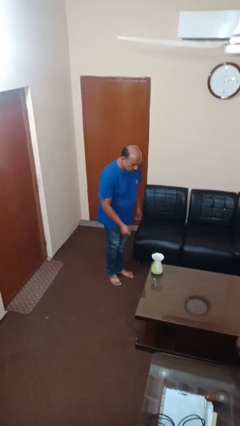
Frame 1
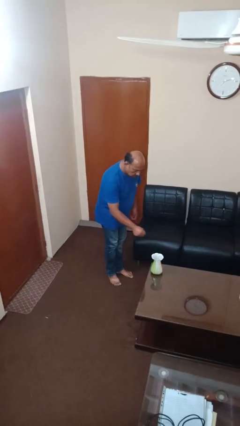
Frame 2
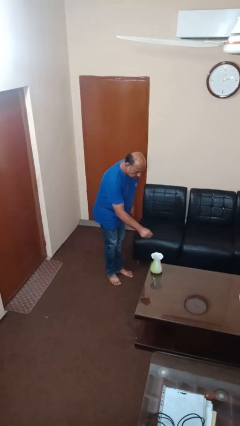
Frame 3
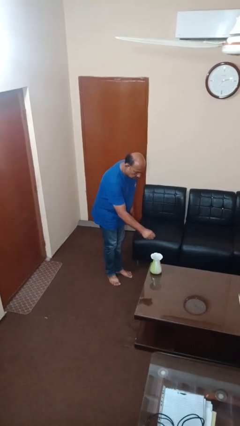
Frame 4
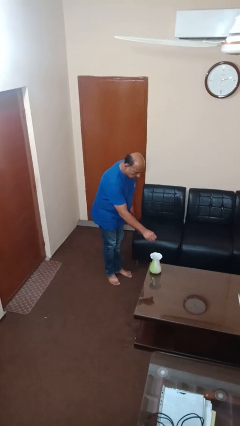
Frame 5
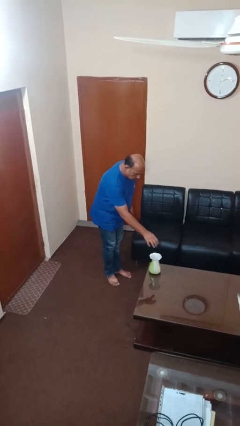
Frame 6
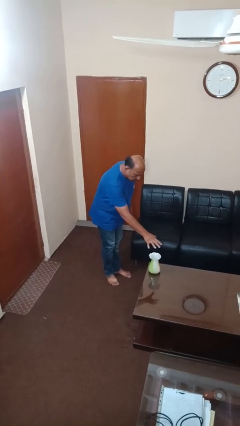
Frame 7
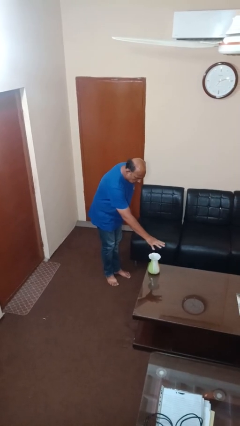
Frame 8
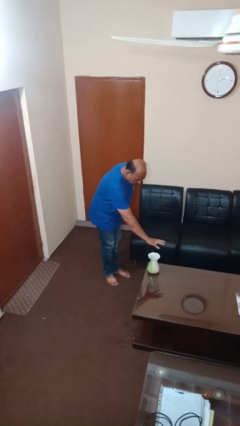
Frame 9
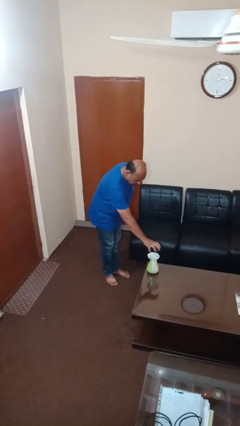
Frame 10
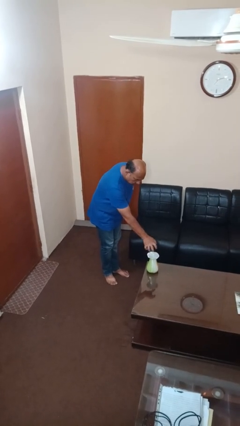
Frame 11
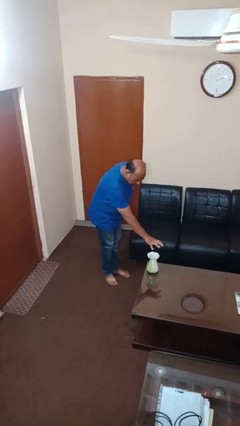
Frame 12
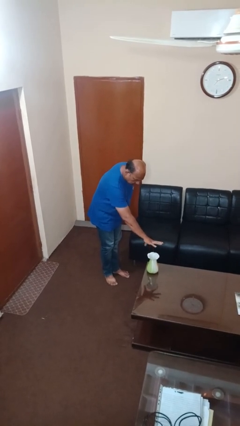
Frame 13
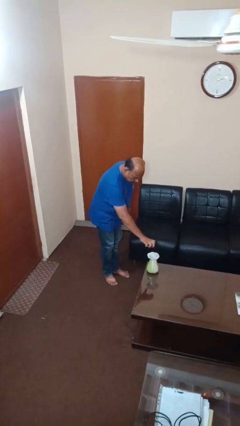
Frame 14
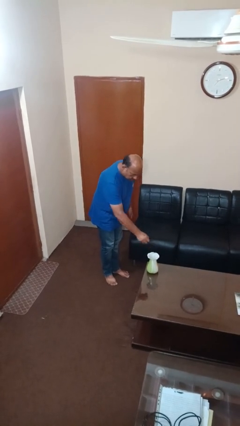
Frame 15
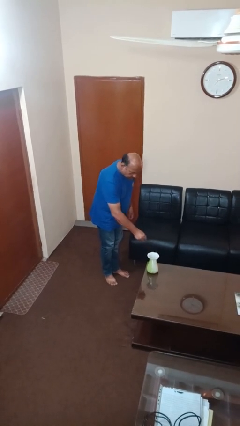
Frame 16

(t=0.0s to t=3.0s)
person waves hand over object

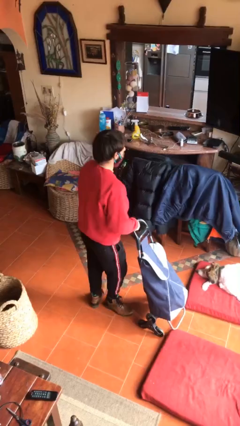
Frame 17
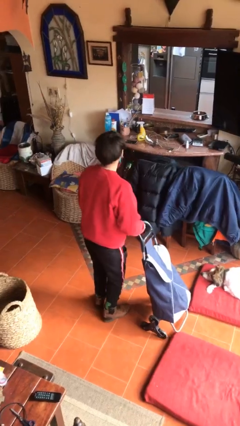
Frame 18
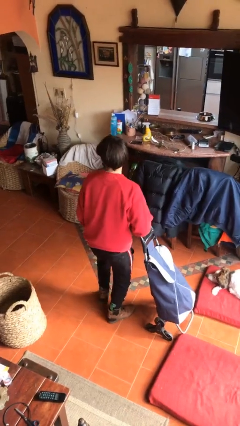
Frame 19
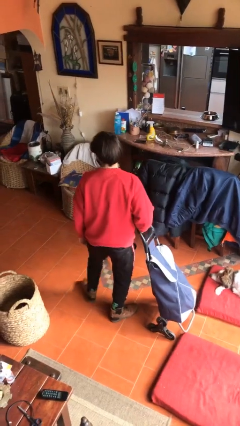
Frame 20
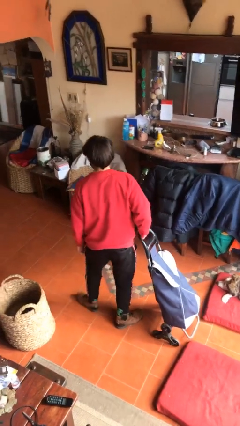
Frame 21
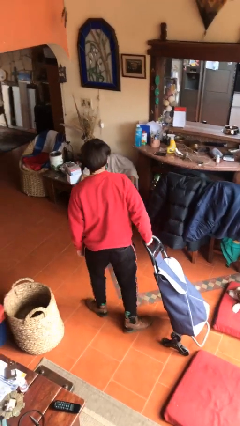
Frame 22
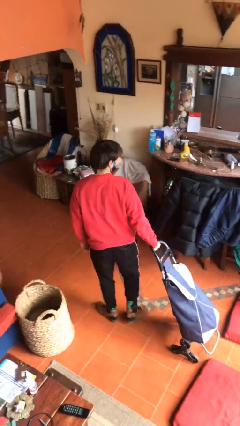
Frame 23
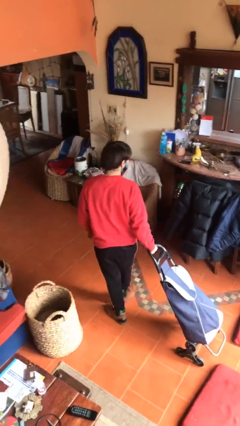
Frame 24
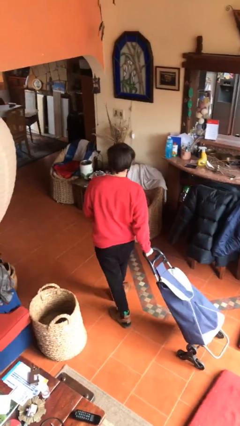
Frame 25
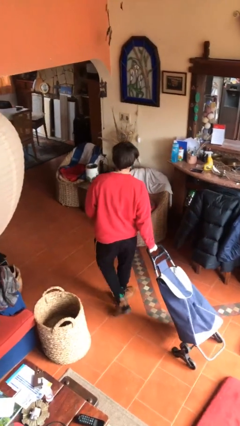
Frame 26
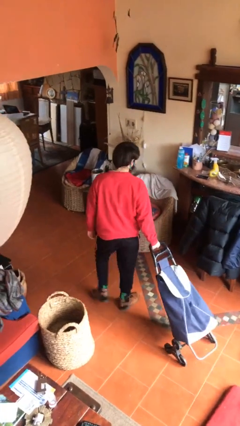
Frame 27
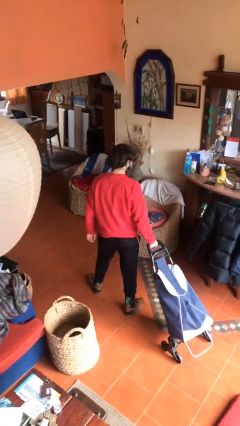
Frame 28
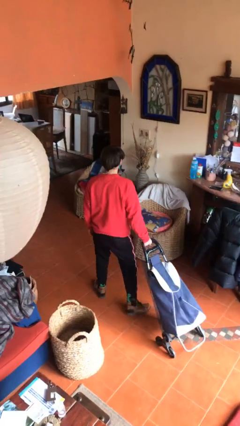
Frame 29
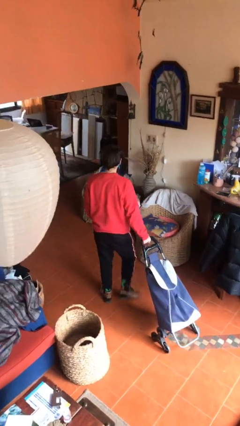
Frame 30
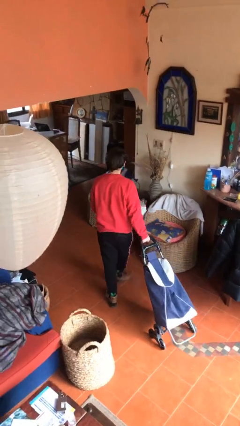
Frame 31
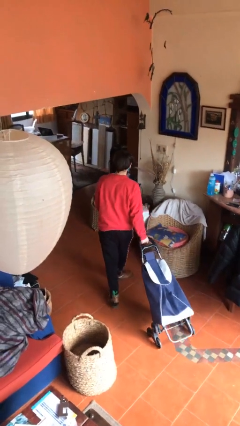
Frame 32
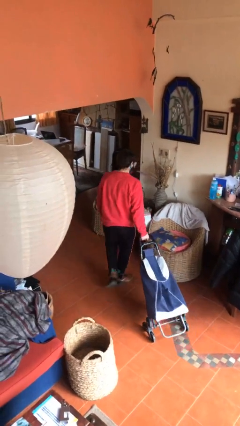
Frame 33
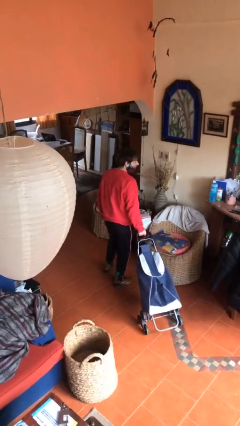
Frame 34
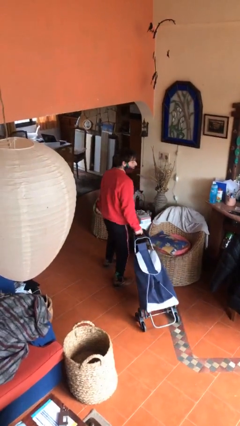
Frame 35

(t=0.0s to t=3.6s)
person pulls wheeled cart

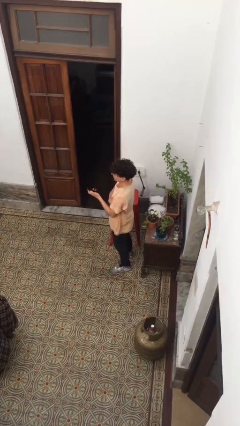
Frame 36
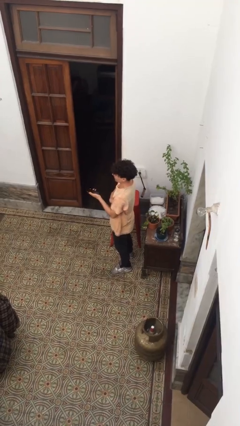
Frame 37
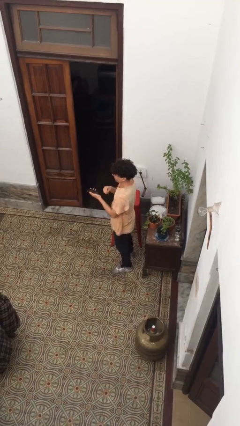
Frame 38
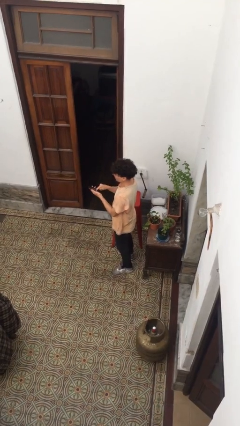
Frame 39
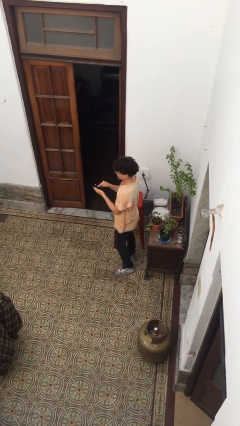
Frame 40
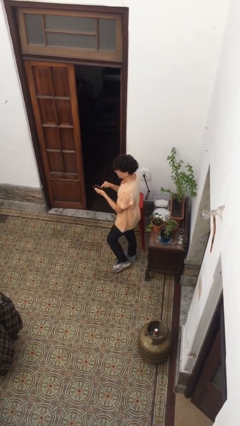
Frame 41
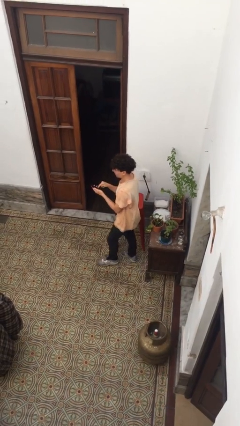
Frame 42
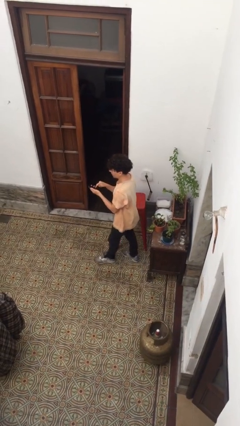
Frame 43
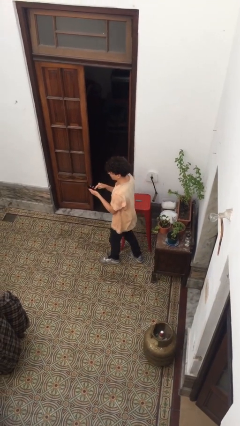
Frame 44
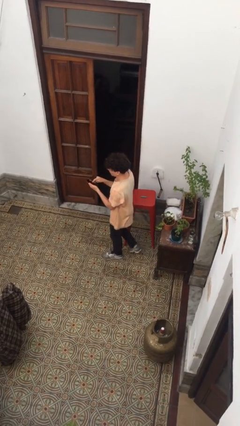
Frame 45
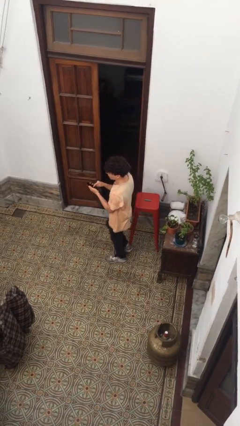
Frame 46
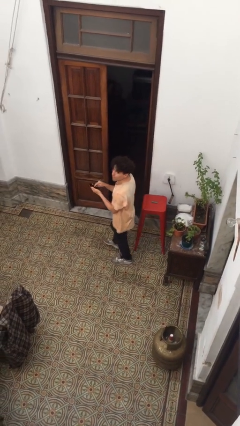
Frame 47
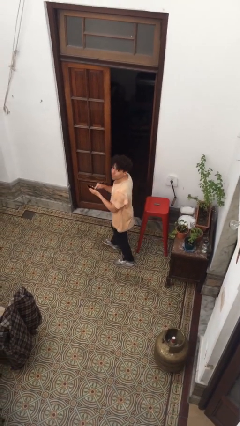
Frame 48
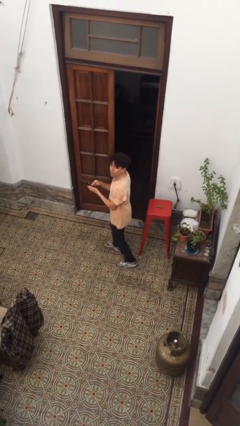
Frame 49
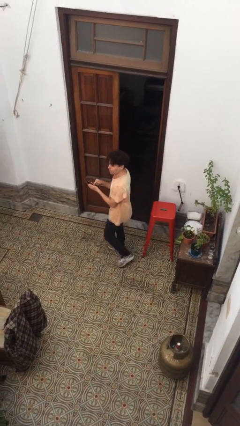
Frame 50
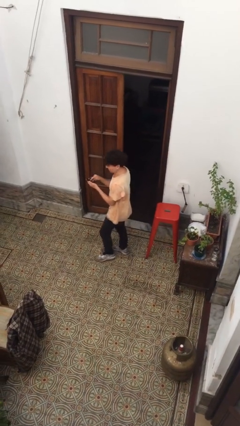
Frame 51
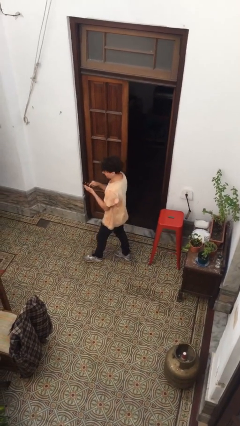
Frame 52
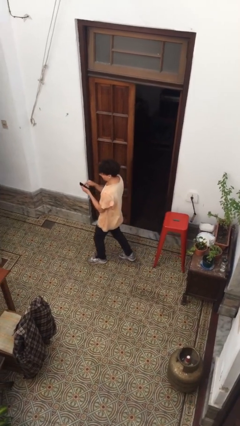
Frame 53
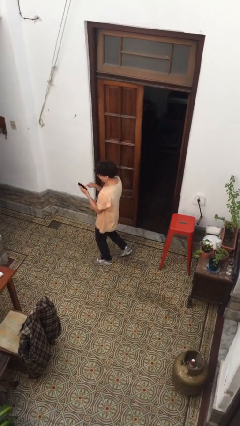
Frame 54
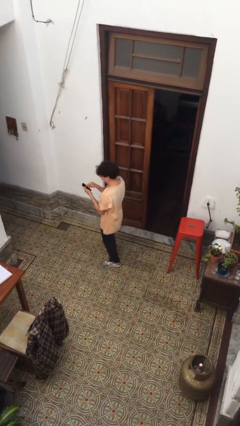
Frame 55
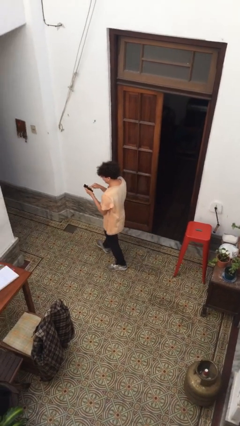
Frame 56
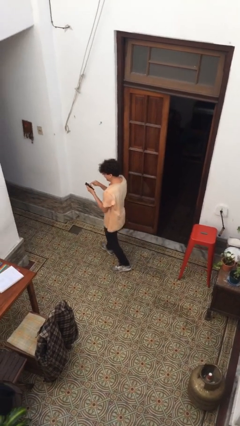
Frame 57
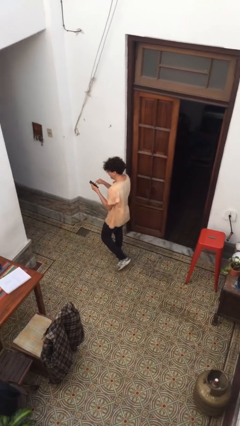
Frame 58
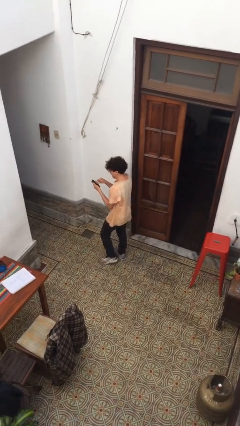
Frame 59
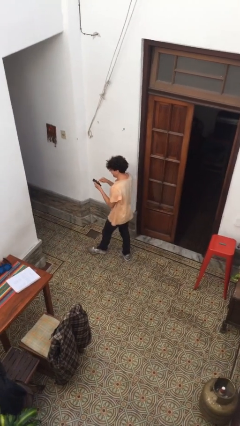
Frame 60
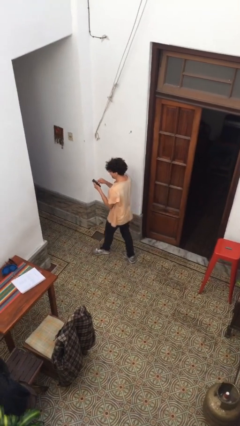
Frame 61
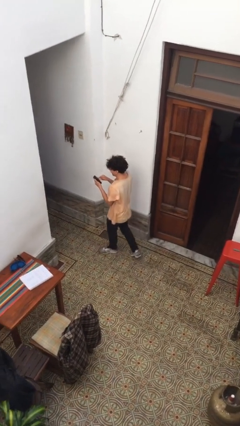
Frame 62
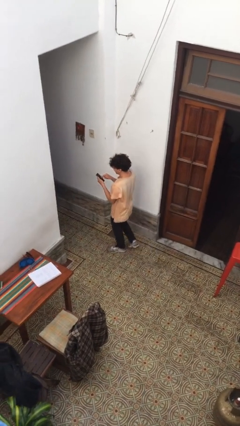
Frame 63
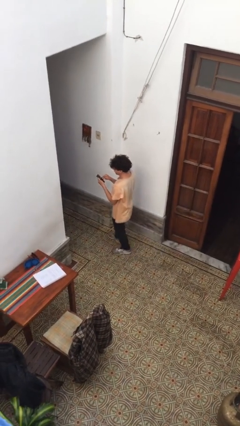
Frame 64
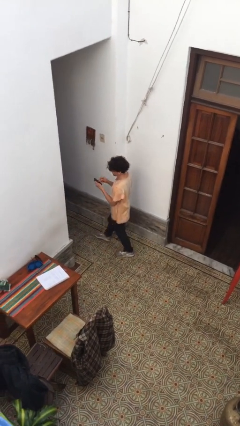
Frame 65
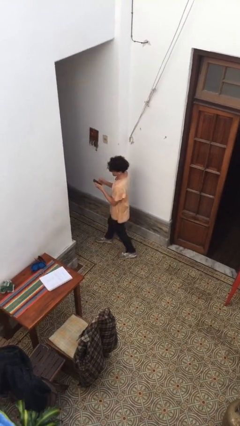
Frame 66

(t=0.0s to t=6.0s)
person texts on phone

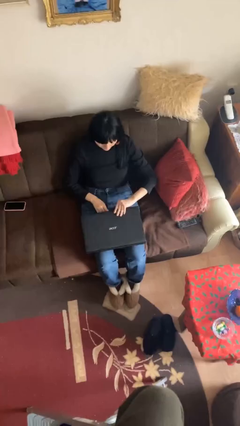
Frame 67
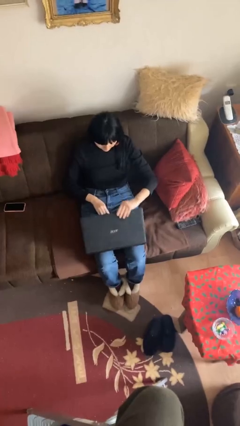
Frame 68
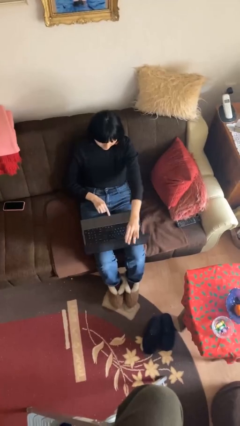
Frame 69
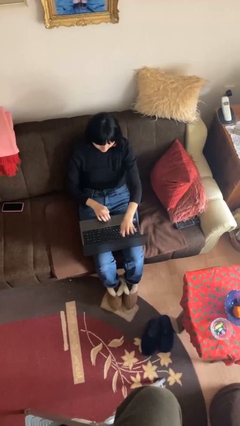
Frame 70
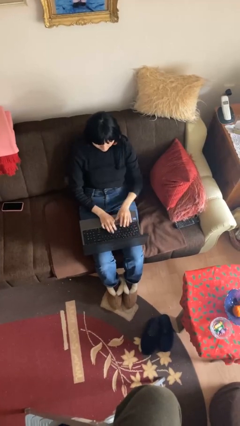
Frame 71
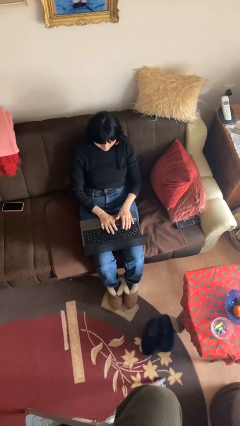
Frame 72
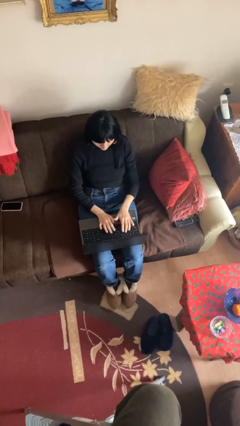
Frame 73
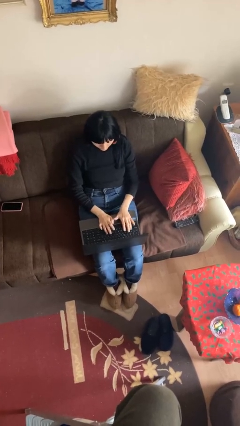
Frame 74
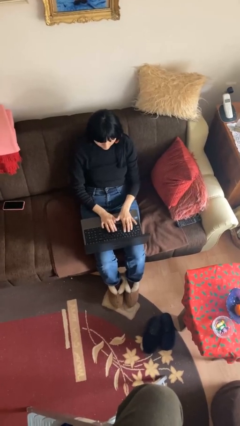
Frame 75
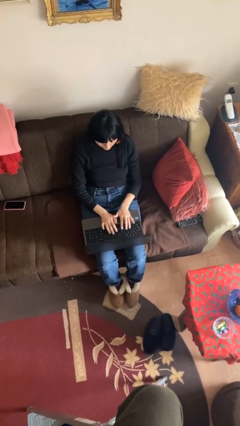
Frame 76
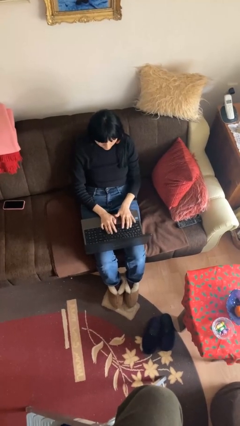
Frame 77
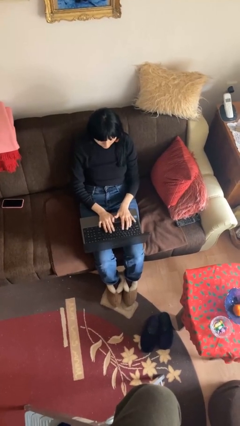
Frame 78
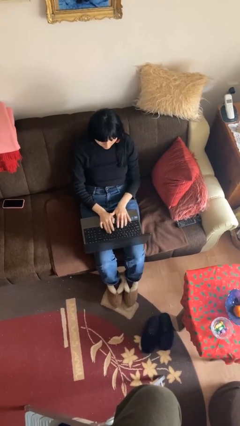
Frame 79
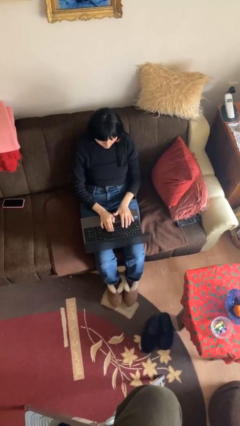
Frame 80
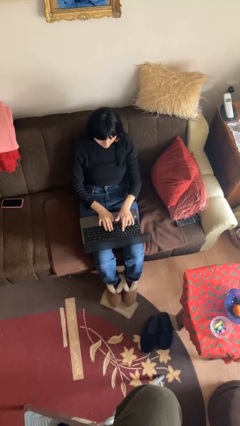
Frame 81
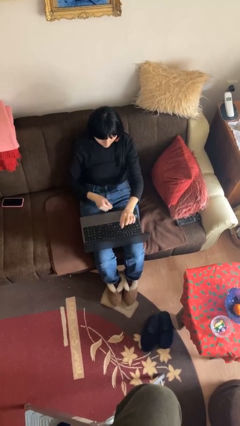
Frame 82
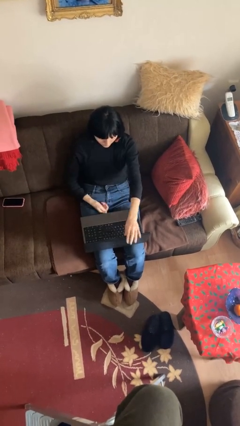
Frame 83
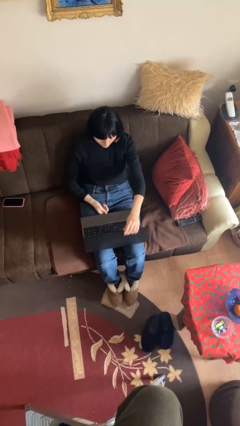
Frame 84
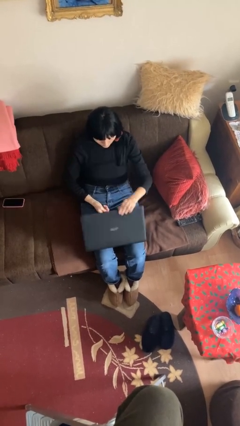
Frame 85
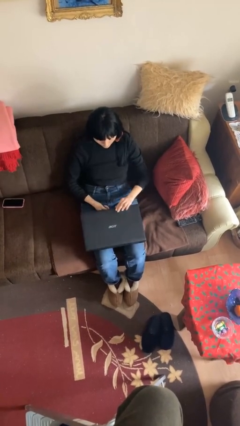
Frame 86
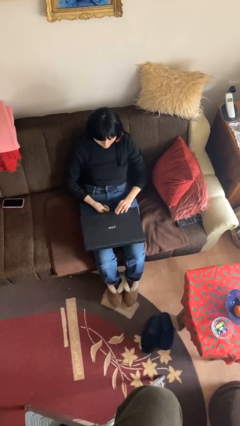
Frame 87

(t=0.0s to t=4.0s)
person interacts with laptop

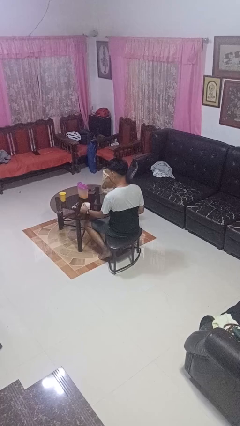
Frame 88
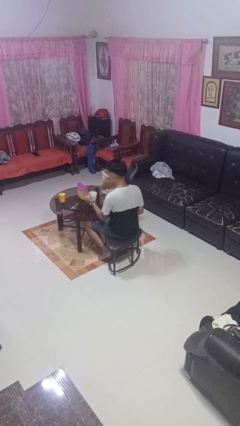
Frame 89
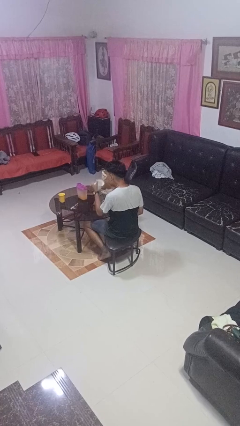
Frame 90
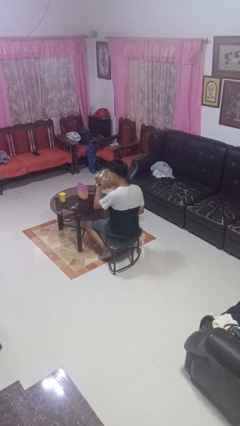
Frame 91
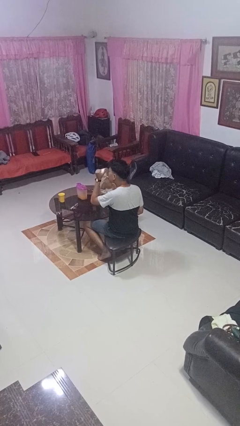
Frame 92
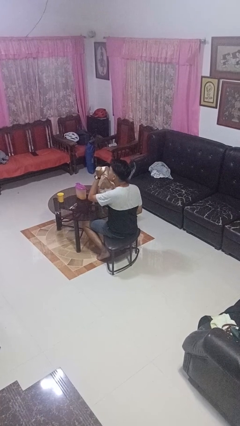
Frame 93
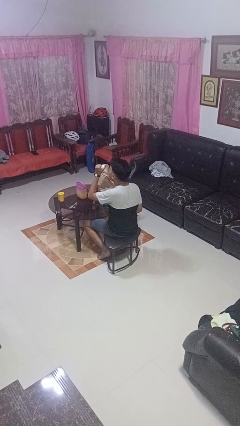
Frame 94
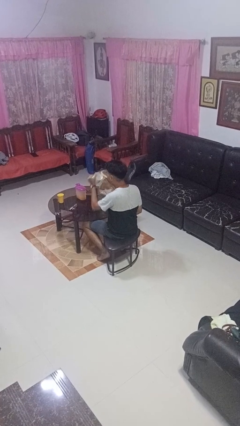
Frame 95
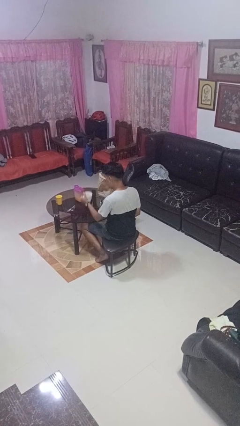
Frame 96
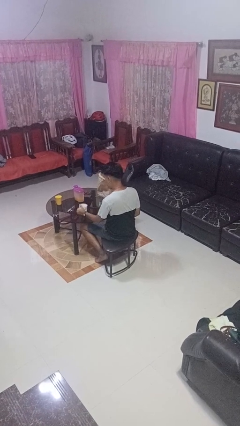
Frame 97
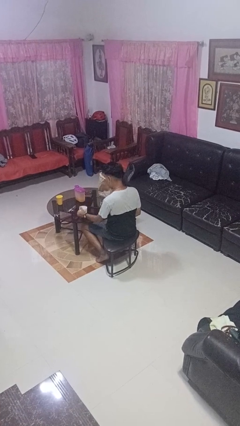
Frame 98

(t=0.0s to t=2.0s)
person drinks from mug
